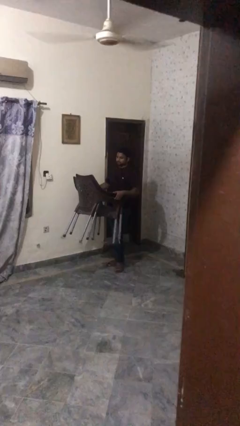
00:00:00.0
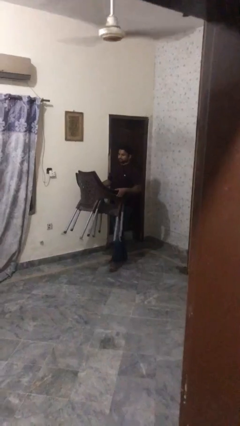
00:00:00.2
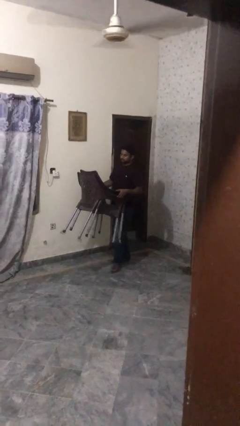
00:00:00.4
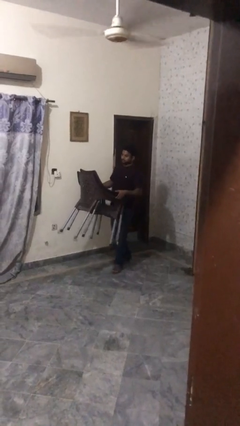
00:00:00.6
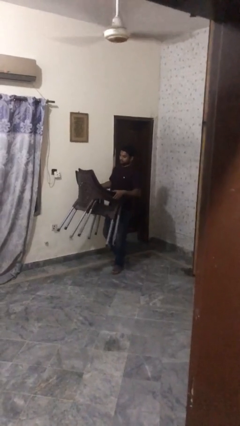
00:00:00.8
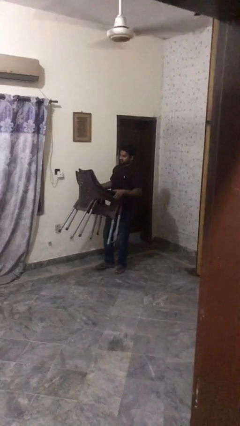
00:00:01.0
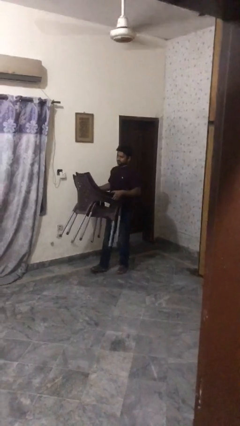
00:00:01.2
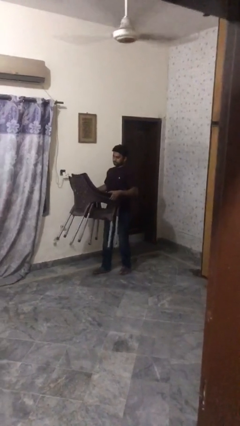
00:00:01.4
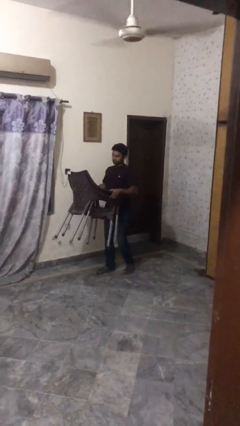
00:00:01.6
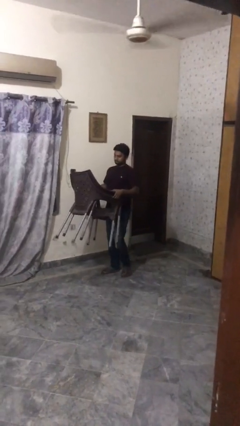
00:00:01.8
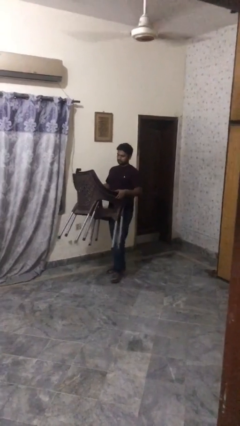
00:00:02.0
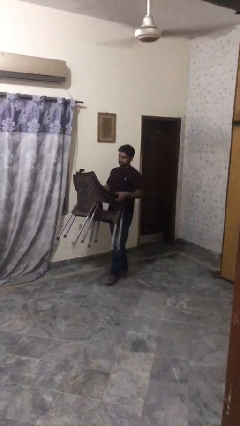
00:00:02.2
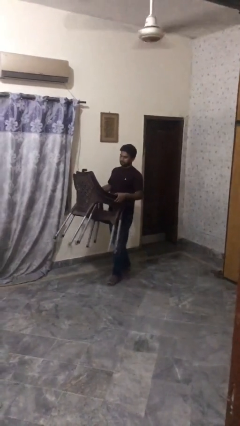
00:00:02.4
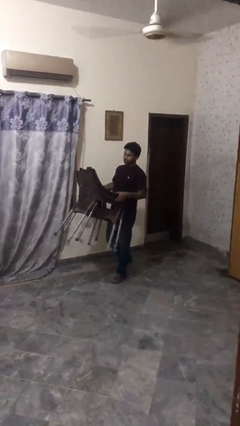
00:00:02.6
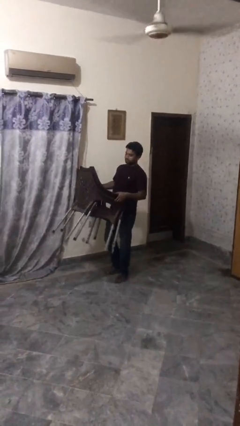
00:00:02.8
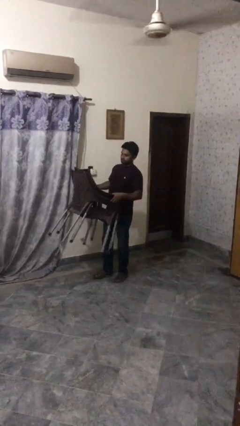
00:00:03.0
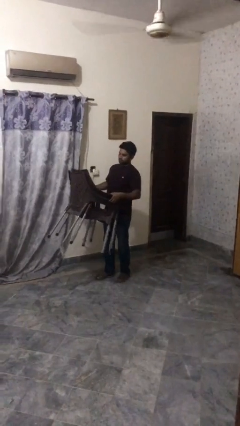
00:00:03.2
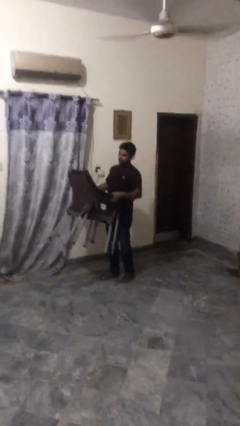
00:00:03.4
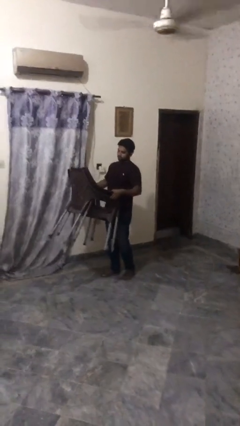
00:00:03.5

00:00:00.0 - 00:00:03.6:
person carries heavy object

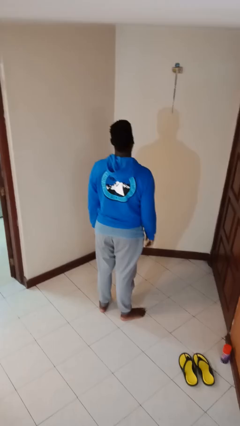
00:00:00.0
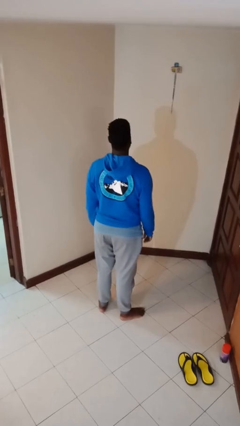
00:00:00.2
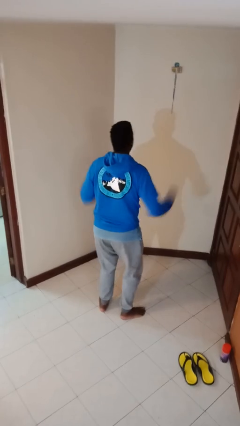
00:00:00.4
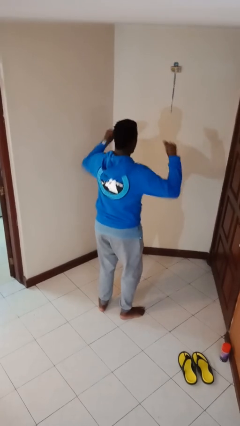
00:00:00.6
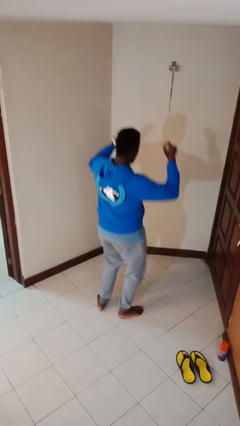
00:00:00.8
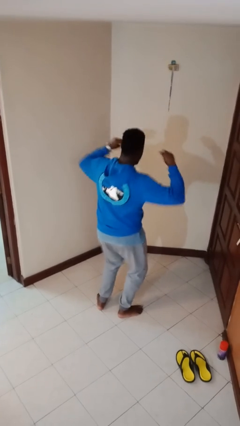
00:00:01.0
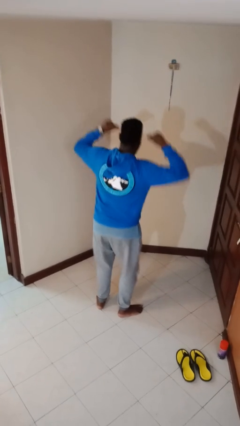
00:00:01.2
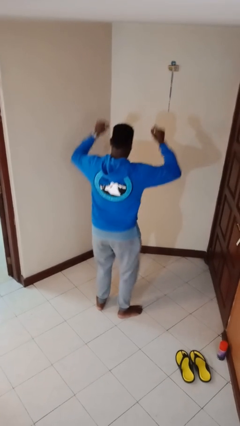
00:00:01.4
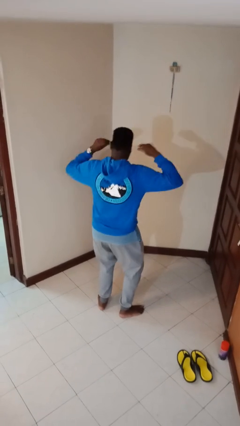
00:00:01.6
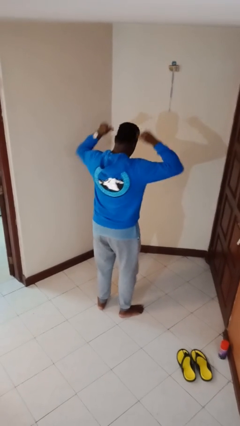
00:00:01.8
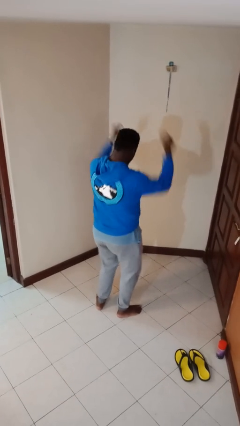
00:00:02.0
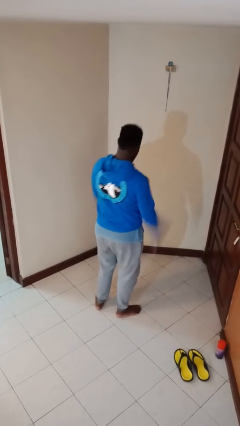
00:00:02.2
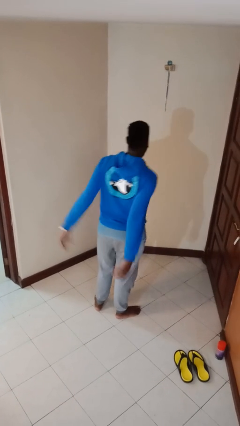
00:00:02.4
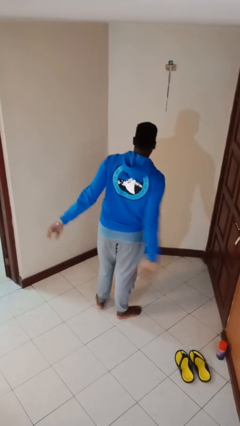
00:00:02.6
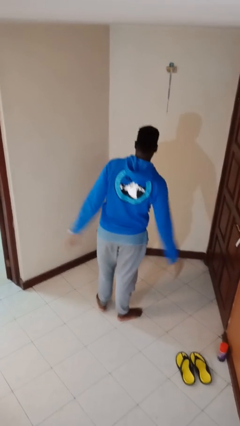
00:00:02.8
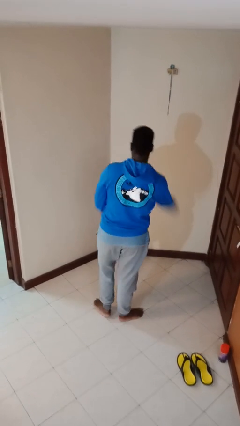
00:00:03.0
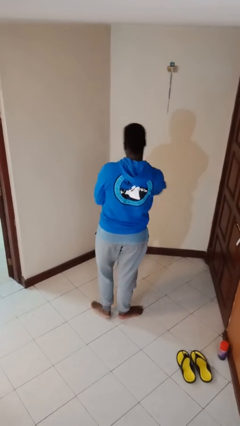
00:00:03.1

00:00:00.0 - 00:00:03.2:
person dances in place

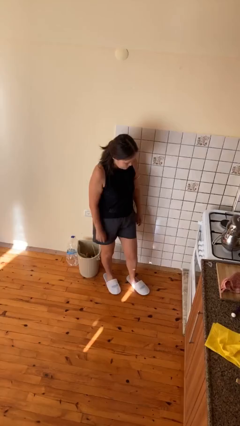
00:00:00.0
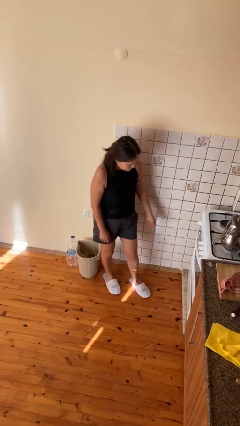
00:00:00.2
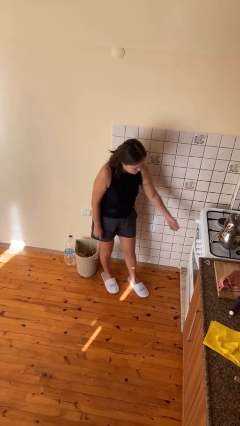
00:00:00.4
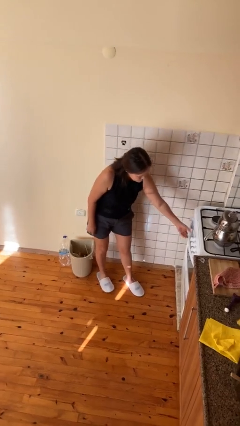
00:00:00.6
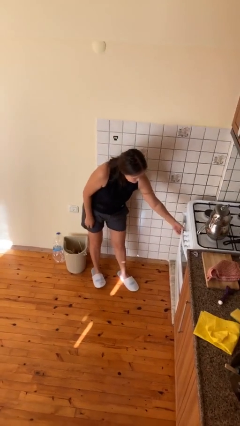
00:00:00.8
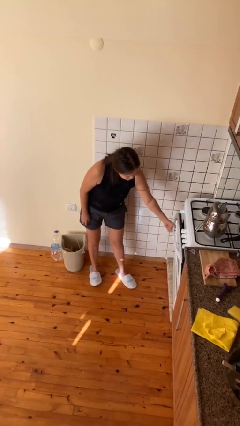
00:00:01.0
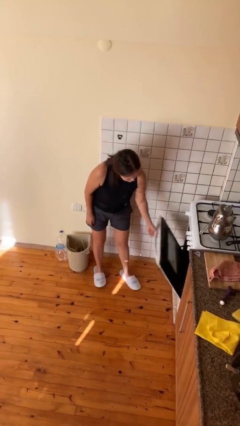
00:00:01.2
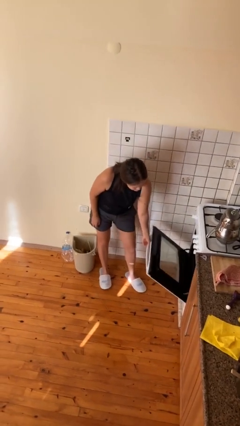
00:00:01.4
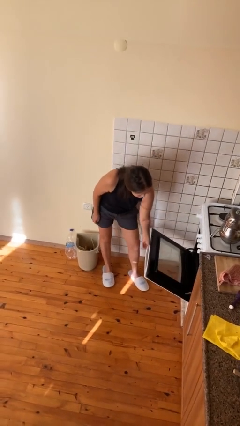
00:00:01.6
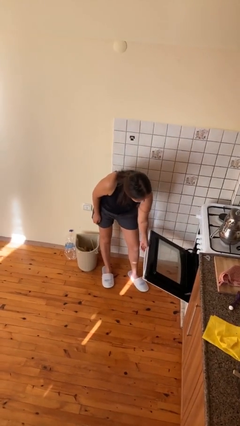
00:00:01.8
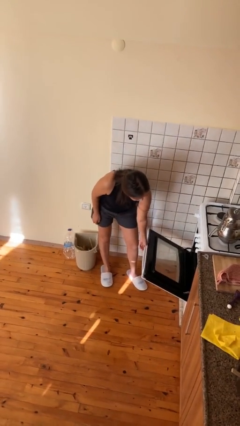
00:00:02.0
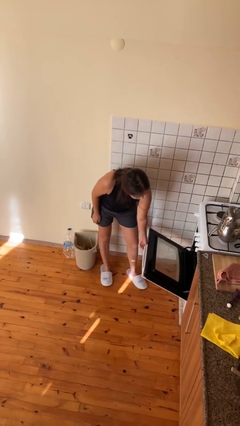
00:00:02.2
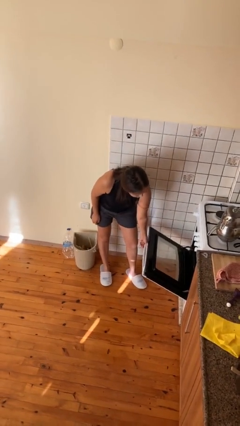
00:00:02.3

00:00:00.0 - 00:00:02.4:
person opens oven door

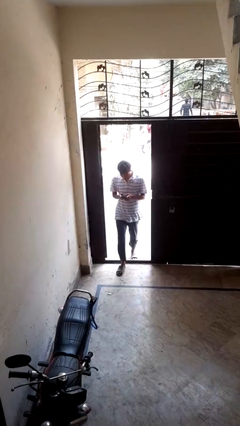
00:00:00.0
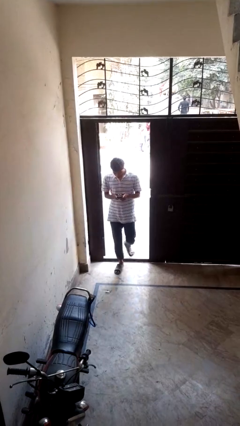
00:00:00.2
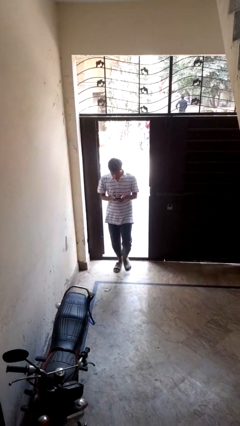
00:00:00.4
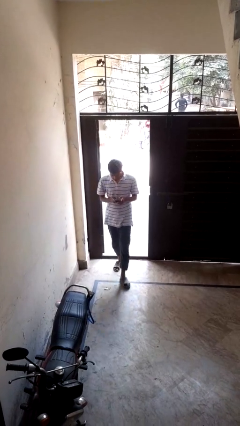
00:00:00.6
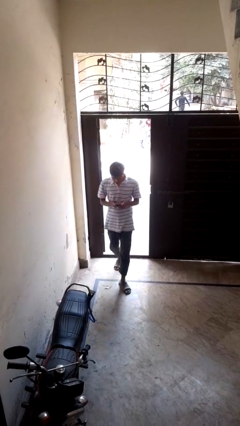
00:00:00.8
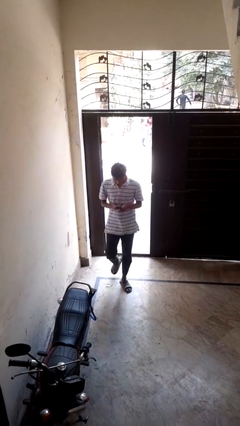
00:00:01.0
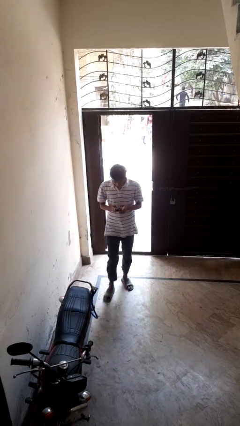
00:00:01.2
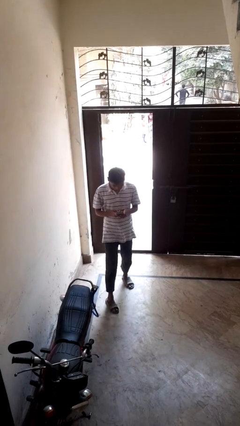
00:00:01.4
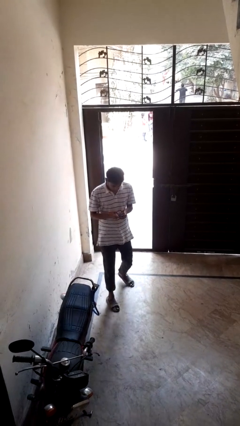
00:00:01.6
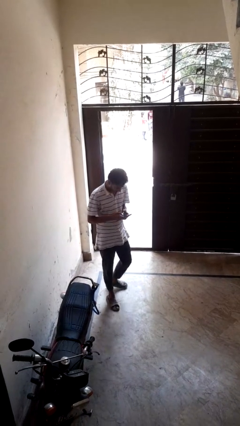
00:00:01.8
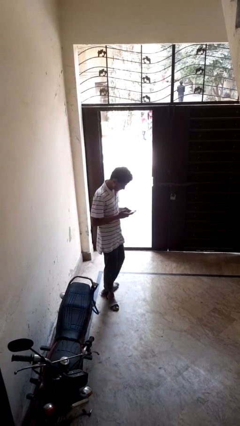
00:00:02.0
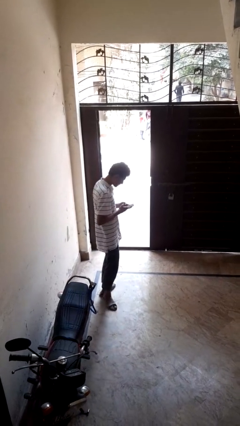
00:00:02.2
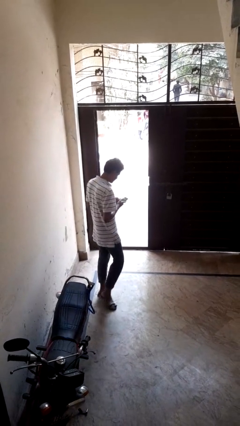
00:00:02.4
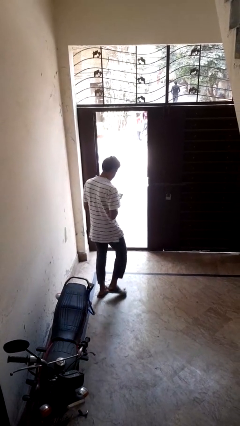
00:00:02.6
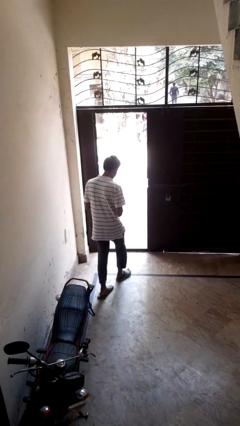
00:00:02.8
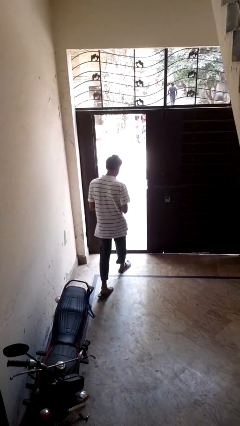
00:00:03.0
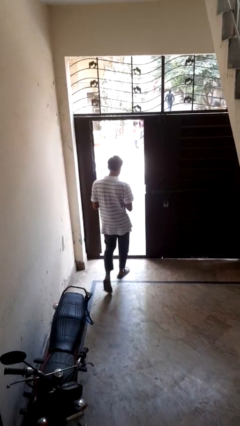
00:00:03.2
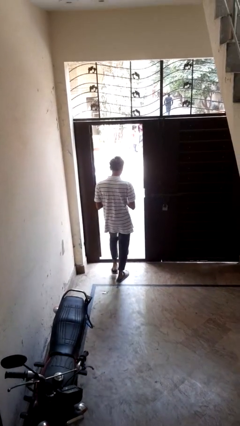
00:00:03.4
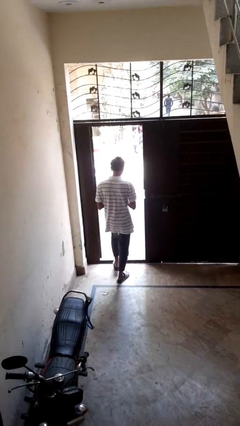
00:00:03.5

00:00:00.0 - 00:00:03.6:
person enters scene through structure

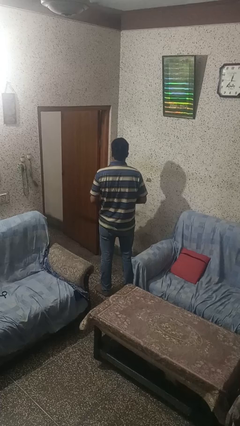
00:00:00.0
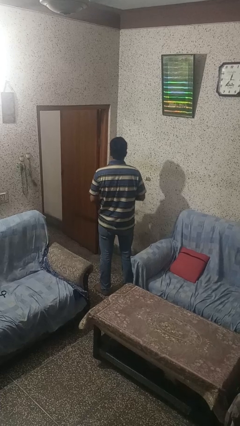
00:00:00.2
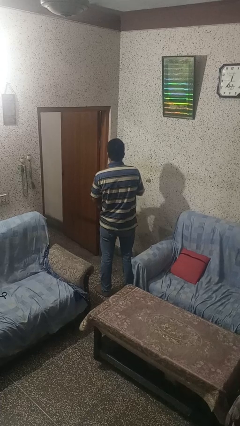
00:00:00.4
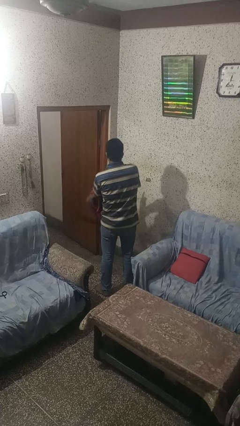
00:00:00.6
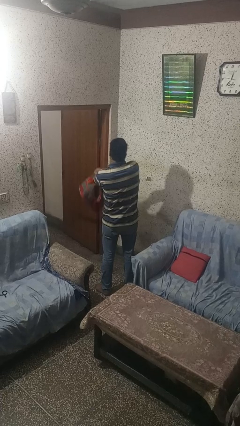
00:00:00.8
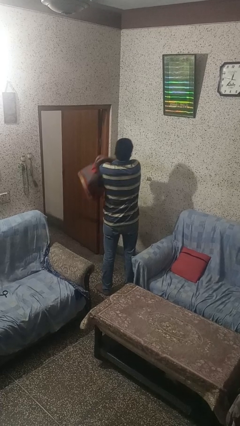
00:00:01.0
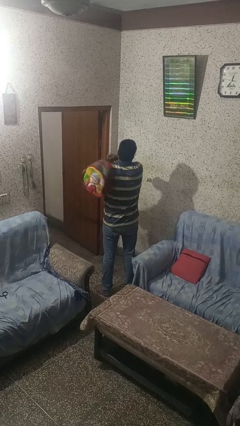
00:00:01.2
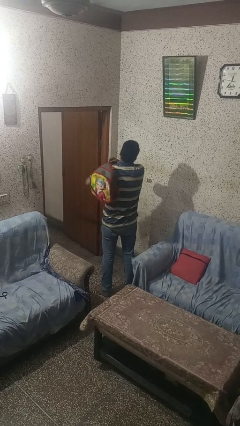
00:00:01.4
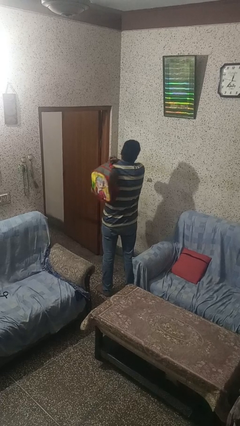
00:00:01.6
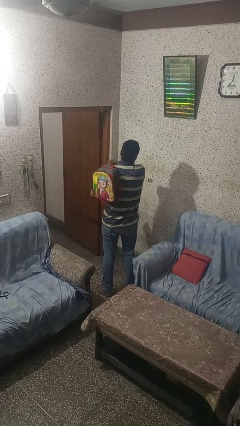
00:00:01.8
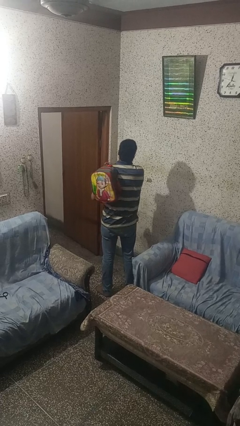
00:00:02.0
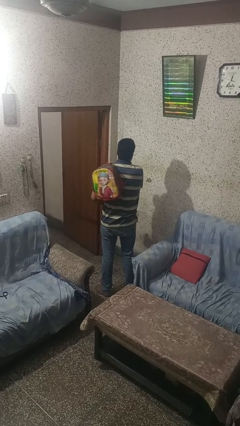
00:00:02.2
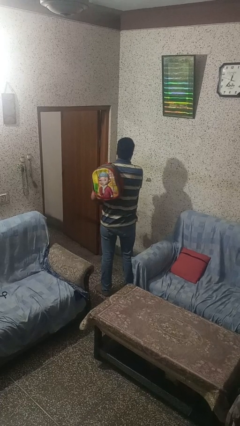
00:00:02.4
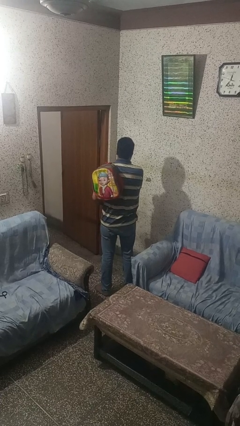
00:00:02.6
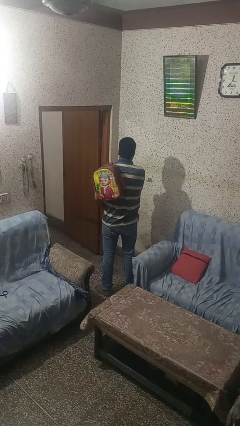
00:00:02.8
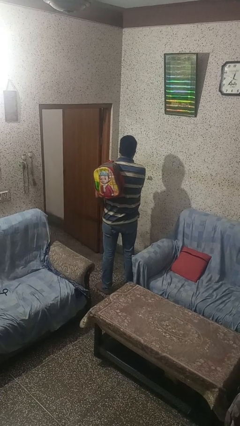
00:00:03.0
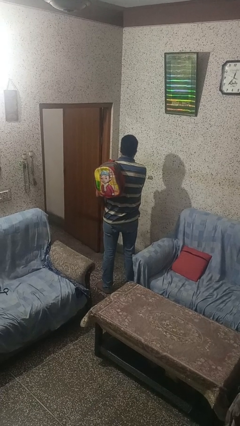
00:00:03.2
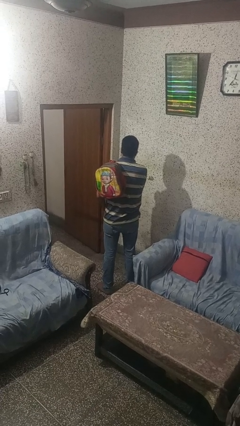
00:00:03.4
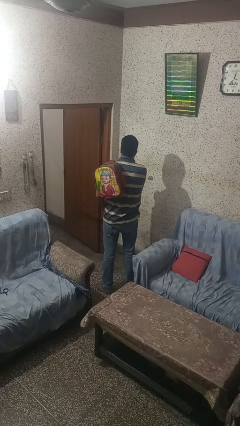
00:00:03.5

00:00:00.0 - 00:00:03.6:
person puts on backpack

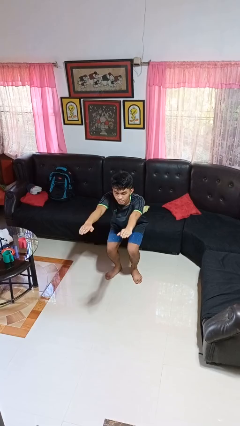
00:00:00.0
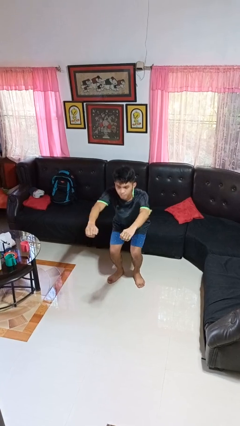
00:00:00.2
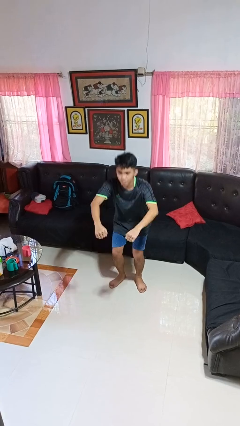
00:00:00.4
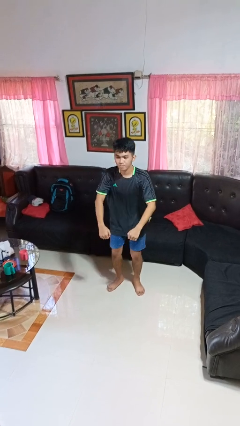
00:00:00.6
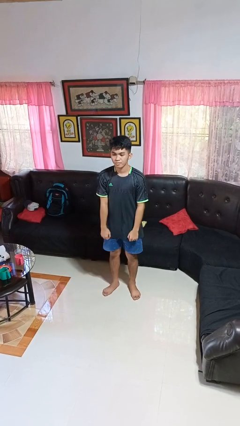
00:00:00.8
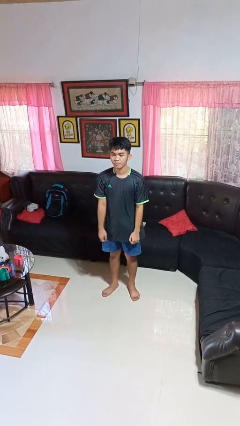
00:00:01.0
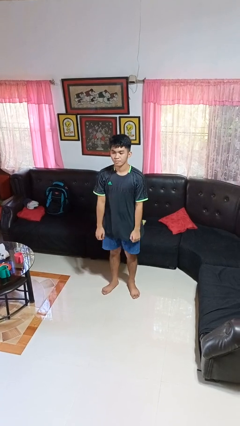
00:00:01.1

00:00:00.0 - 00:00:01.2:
person stands up
